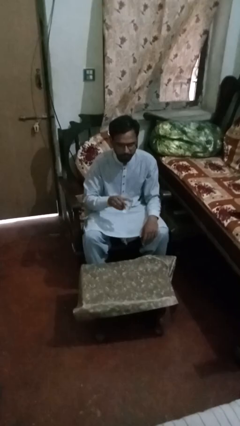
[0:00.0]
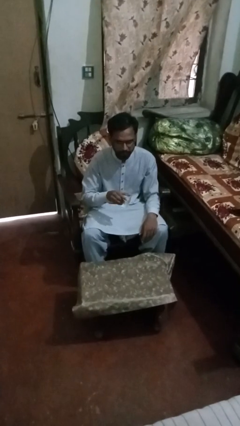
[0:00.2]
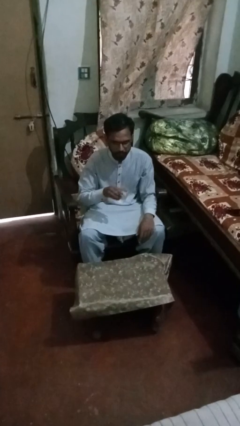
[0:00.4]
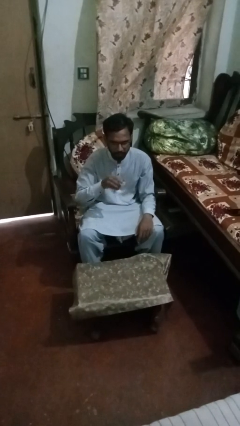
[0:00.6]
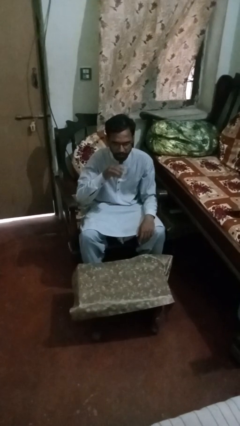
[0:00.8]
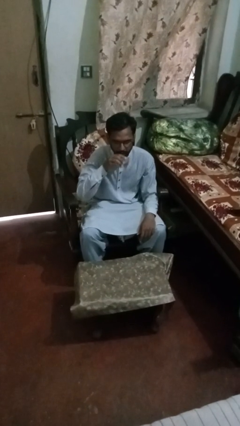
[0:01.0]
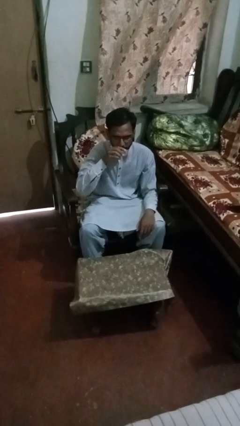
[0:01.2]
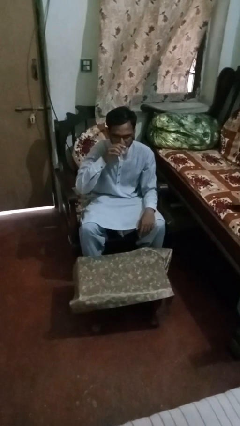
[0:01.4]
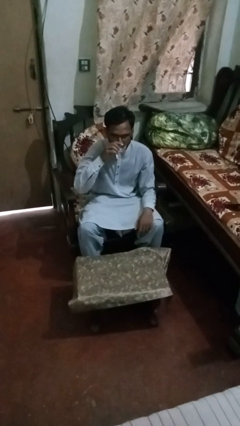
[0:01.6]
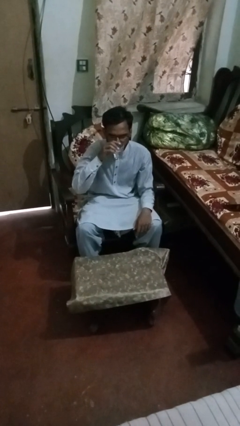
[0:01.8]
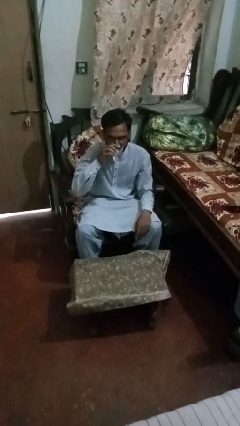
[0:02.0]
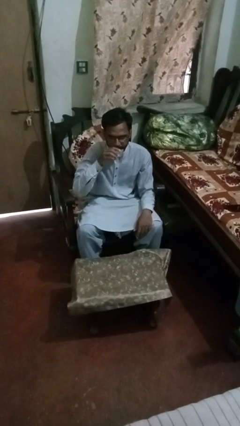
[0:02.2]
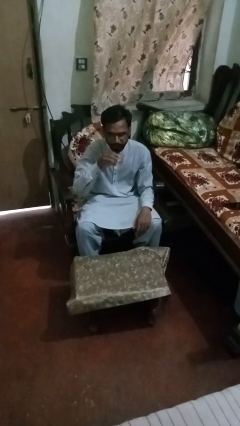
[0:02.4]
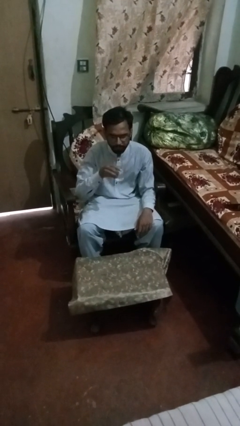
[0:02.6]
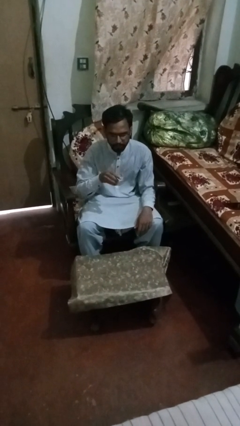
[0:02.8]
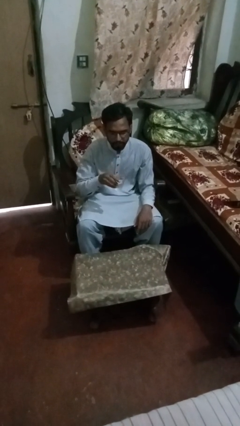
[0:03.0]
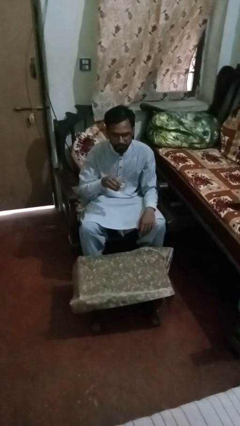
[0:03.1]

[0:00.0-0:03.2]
person drinks from shotglass

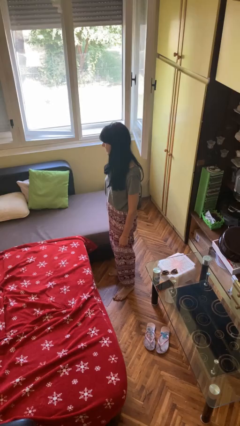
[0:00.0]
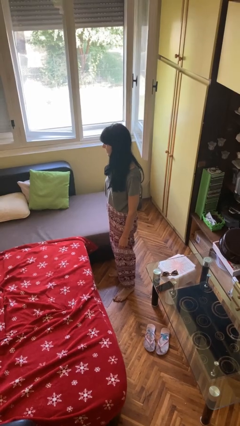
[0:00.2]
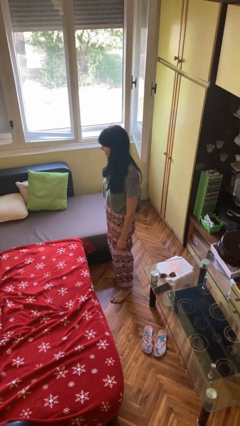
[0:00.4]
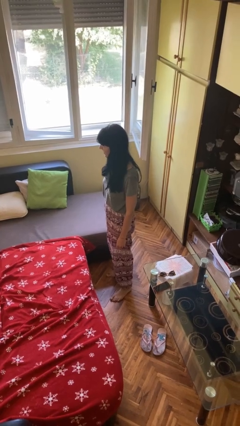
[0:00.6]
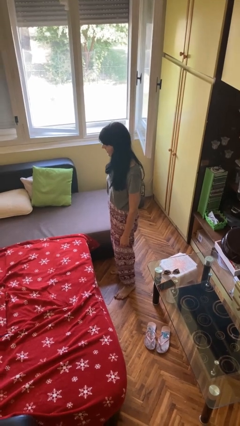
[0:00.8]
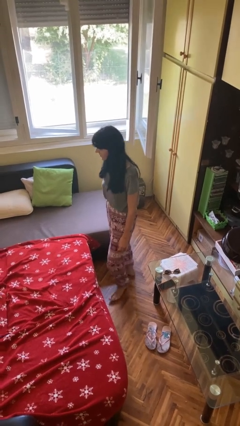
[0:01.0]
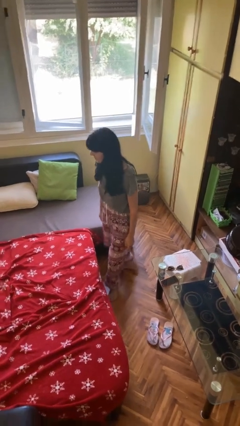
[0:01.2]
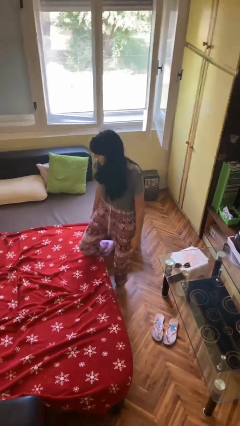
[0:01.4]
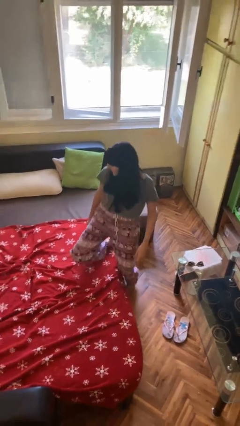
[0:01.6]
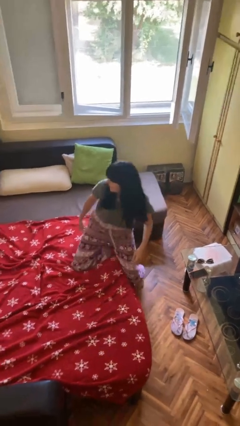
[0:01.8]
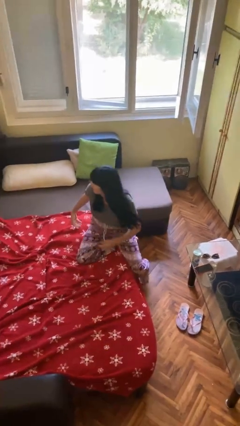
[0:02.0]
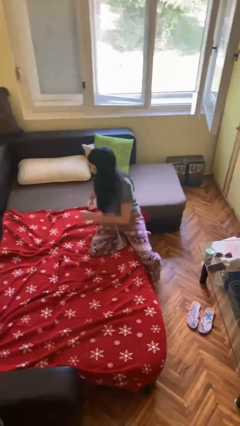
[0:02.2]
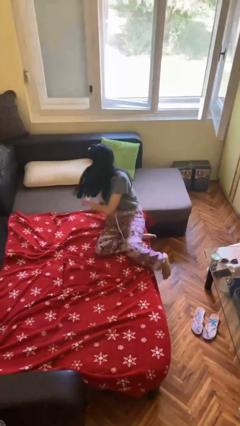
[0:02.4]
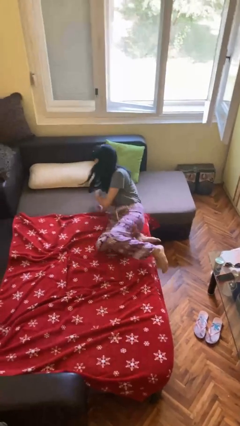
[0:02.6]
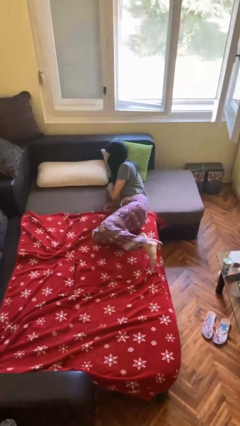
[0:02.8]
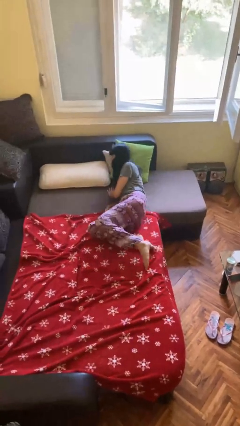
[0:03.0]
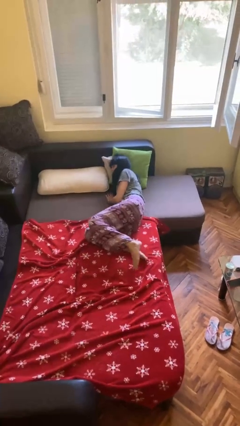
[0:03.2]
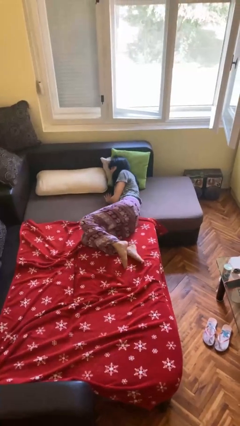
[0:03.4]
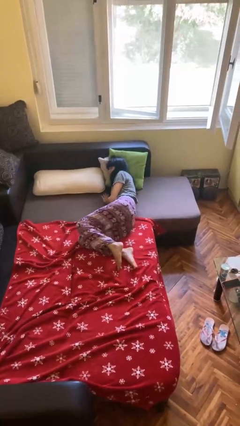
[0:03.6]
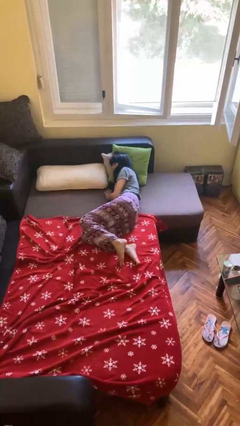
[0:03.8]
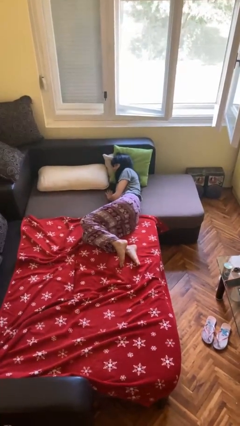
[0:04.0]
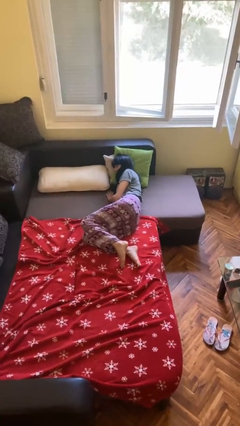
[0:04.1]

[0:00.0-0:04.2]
person lies down on bed

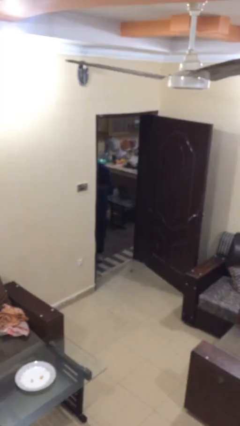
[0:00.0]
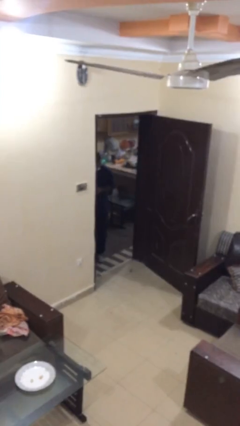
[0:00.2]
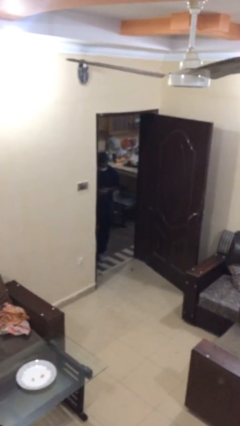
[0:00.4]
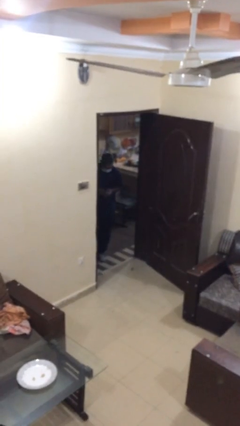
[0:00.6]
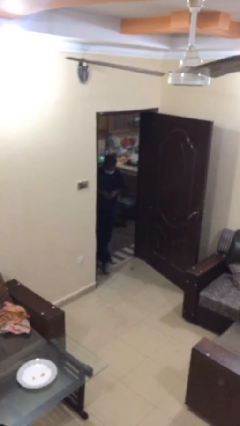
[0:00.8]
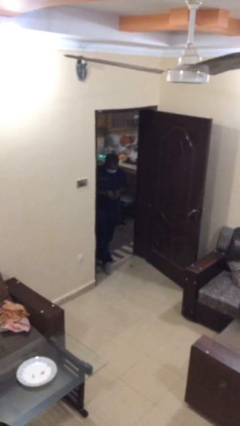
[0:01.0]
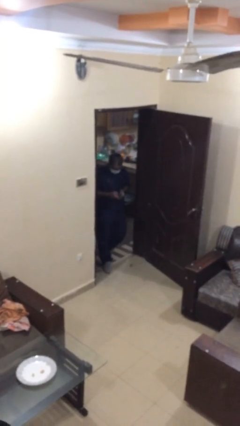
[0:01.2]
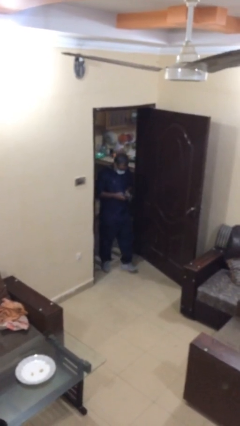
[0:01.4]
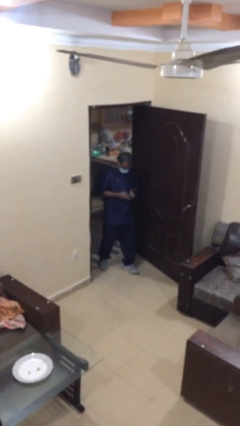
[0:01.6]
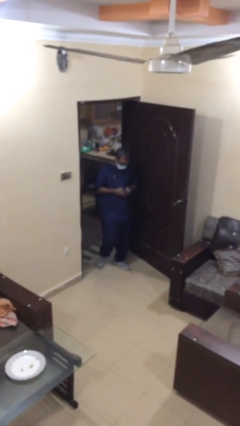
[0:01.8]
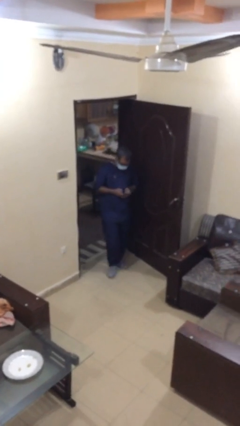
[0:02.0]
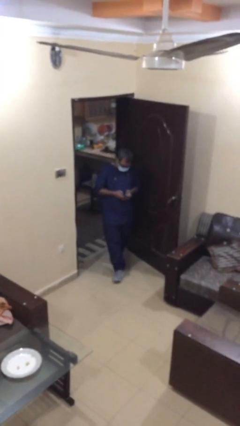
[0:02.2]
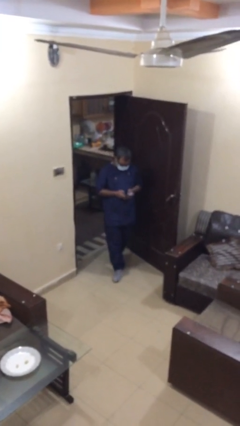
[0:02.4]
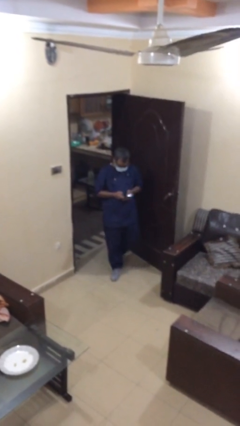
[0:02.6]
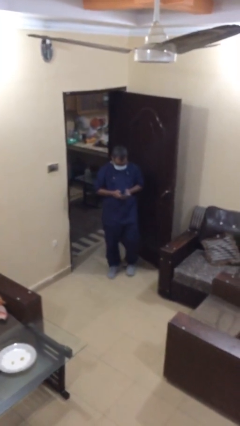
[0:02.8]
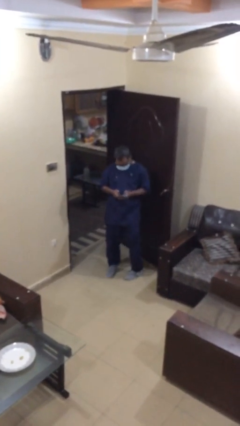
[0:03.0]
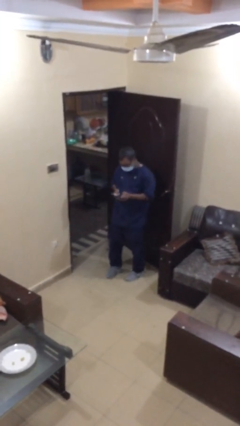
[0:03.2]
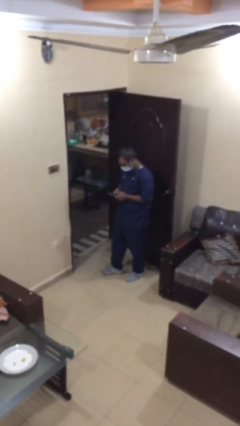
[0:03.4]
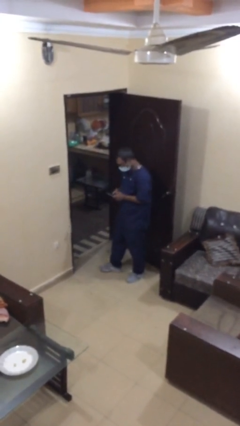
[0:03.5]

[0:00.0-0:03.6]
person enters scene through structure

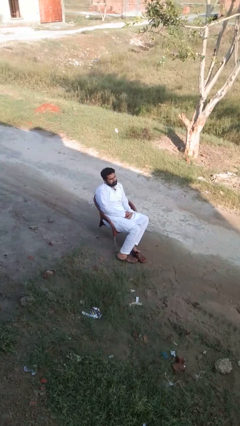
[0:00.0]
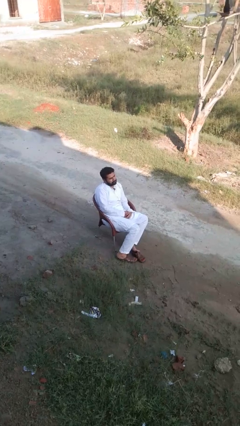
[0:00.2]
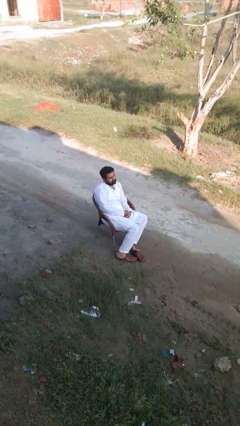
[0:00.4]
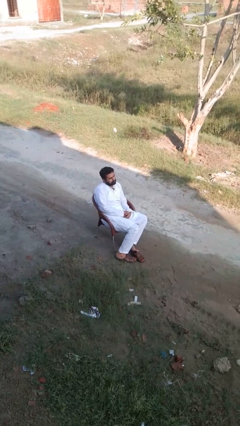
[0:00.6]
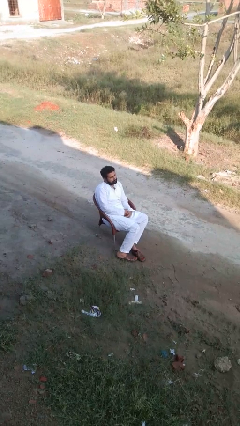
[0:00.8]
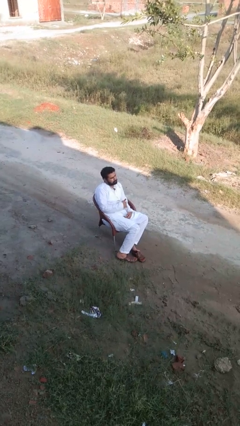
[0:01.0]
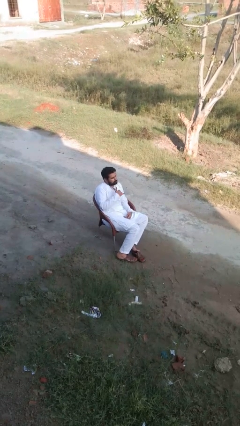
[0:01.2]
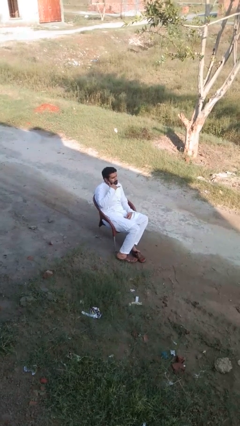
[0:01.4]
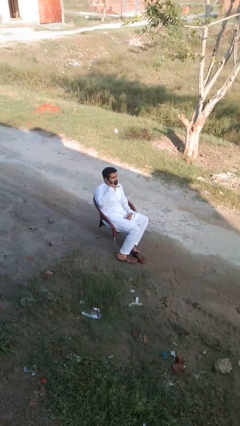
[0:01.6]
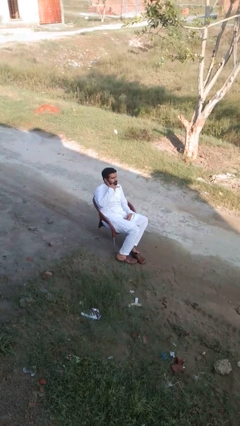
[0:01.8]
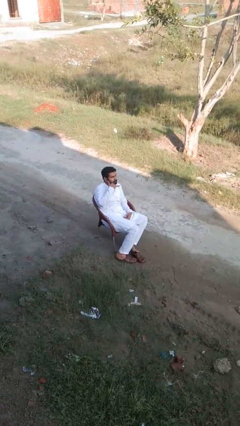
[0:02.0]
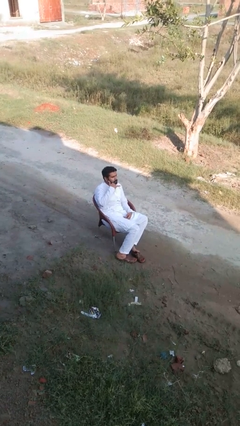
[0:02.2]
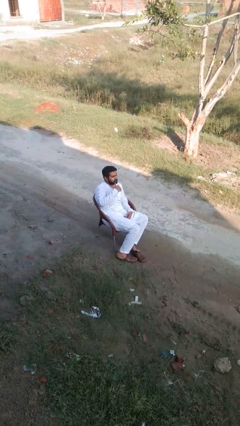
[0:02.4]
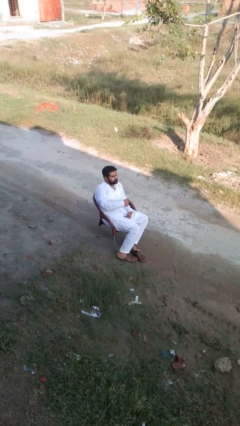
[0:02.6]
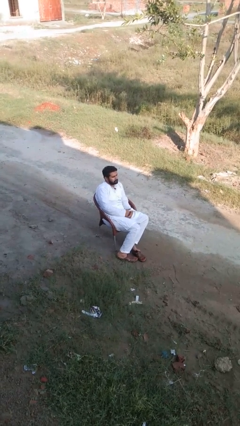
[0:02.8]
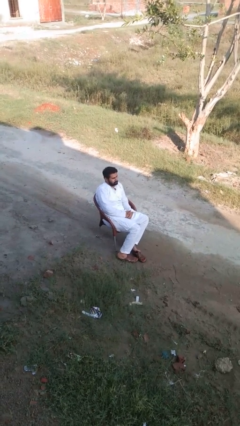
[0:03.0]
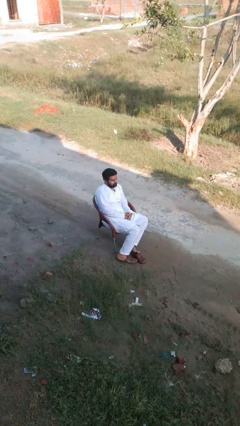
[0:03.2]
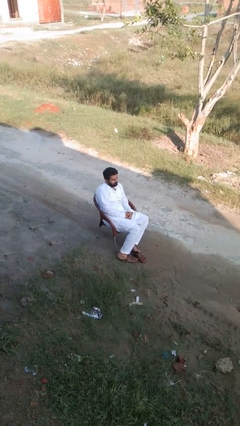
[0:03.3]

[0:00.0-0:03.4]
person gestures call me

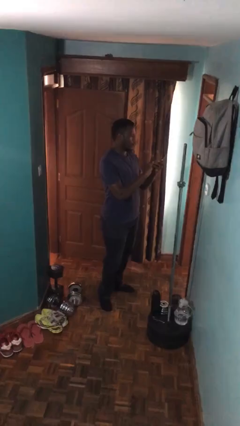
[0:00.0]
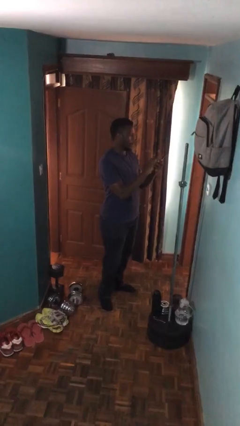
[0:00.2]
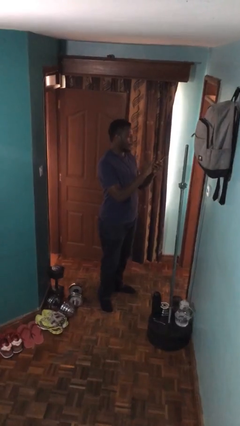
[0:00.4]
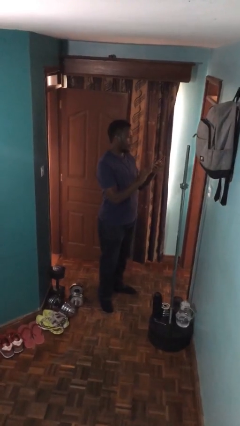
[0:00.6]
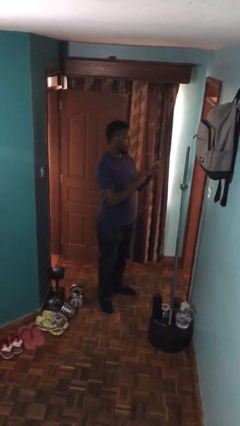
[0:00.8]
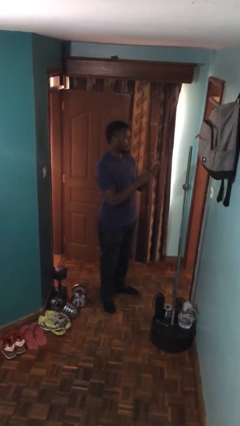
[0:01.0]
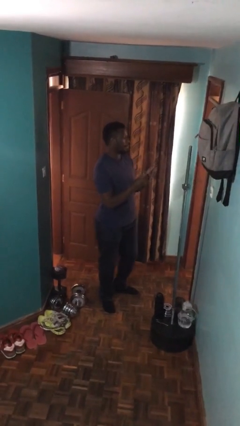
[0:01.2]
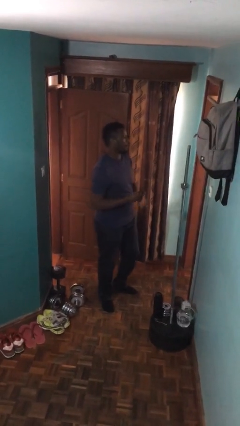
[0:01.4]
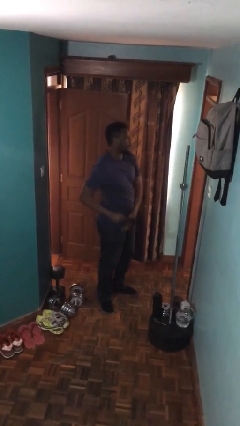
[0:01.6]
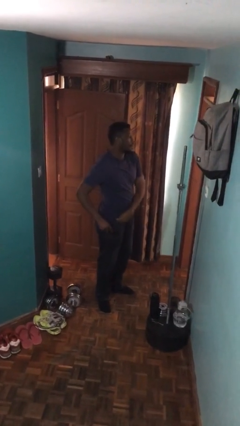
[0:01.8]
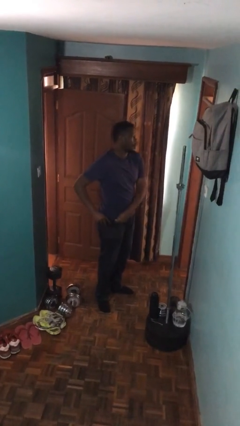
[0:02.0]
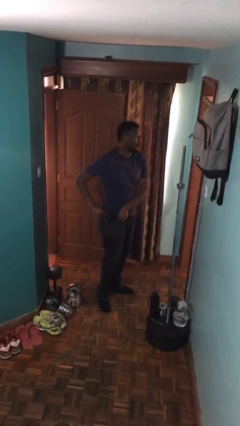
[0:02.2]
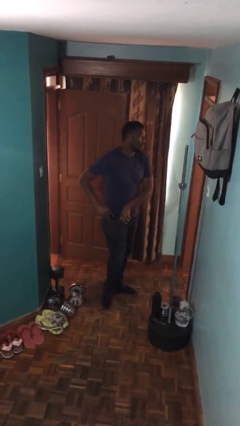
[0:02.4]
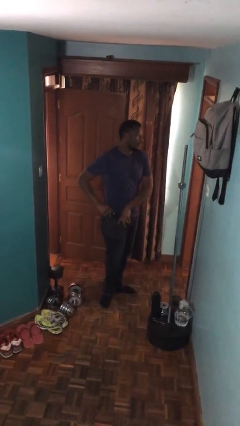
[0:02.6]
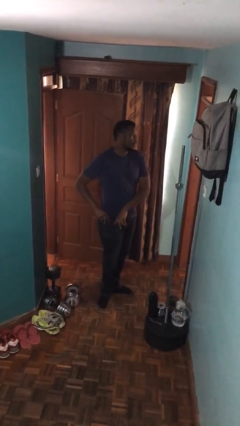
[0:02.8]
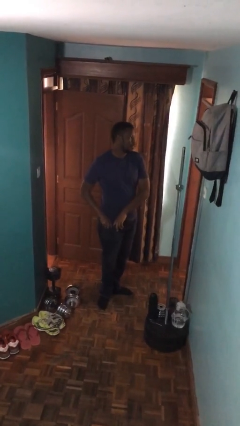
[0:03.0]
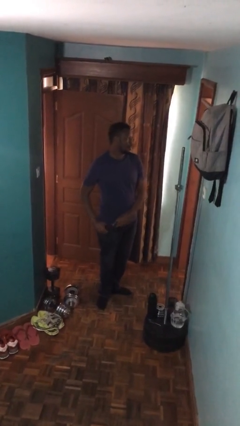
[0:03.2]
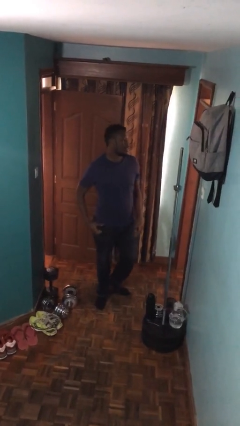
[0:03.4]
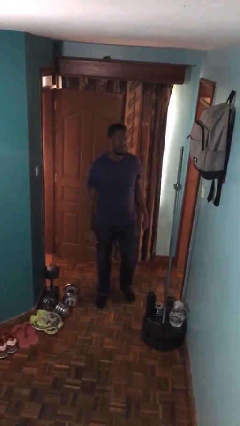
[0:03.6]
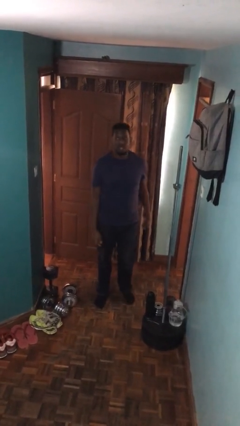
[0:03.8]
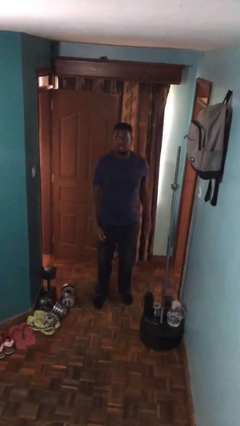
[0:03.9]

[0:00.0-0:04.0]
person puts phone into pocket
